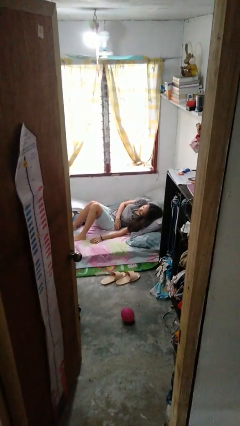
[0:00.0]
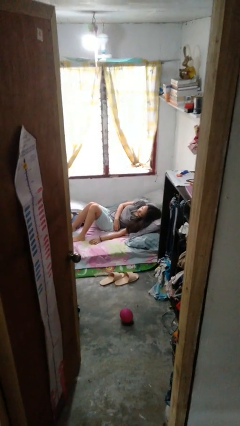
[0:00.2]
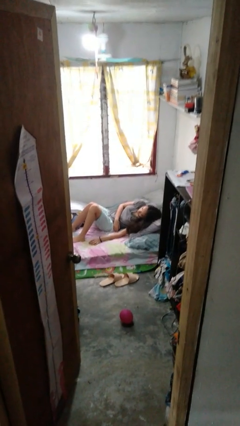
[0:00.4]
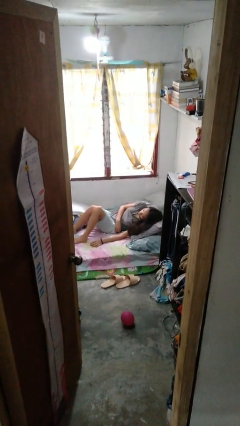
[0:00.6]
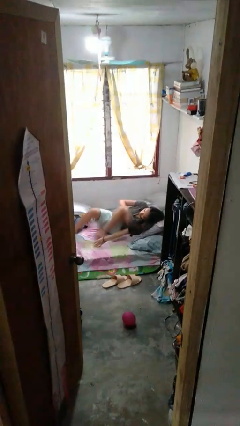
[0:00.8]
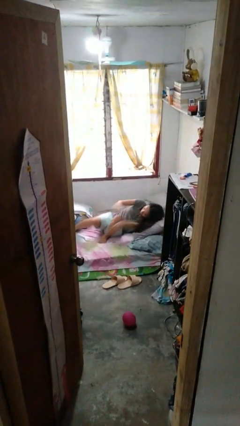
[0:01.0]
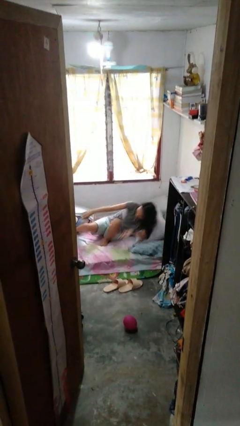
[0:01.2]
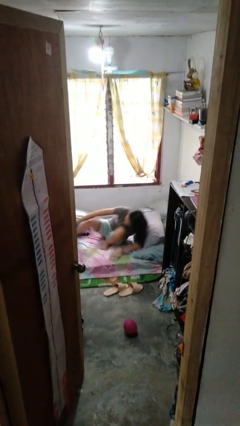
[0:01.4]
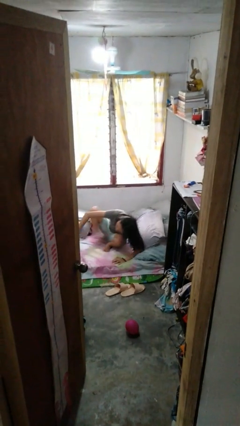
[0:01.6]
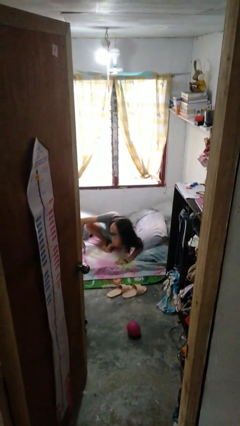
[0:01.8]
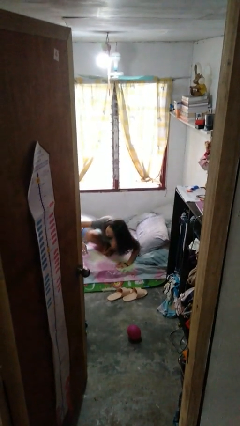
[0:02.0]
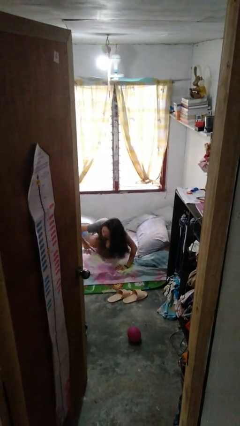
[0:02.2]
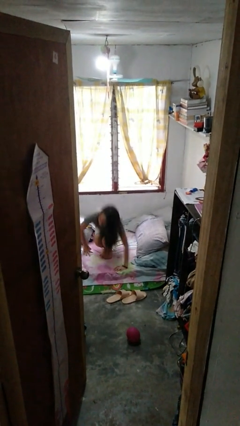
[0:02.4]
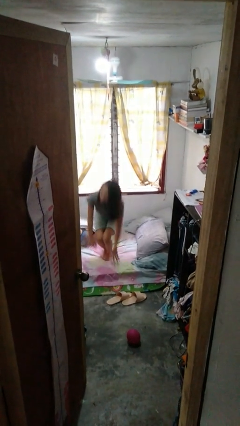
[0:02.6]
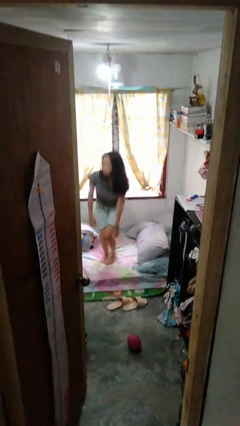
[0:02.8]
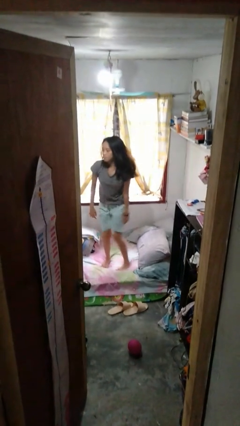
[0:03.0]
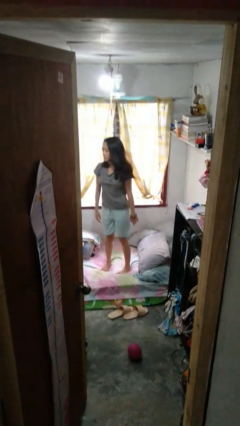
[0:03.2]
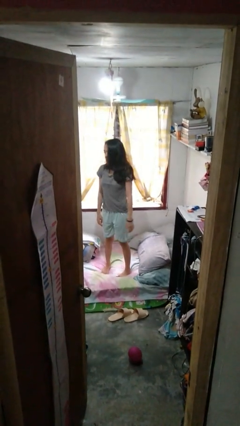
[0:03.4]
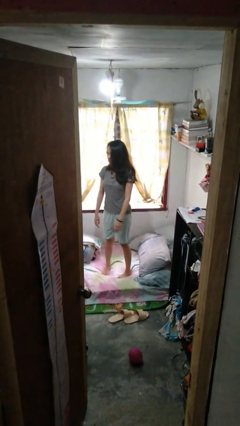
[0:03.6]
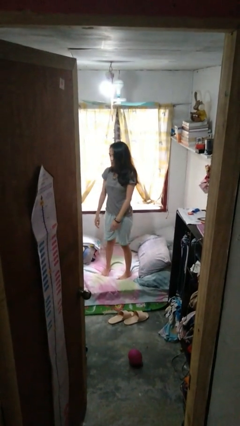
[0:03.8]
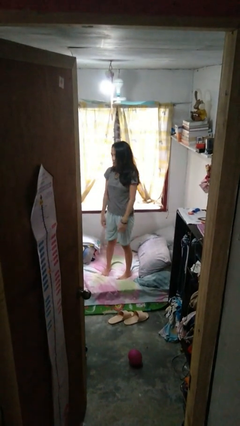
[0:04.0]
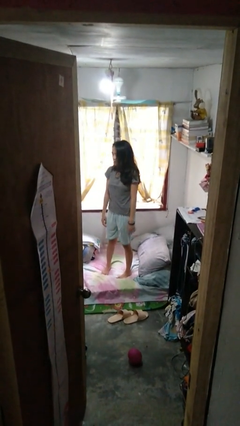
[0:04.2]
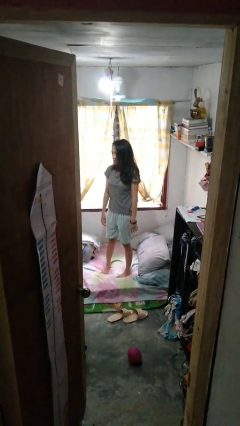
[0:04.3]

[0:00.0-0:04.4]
person stands up

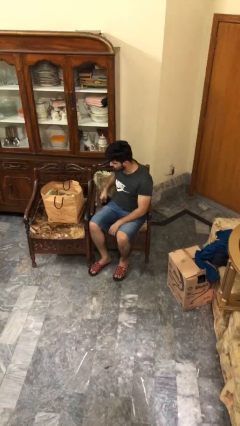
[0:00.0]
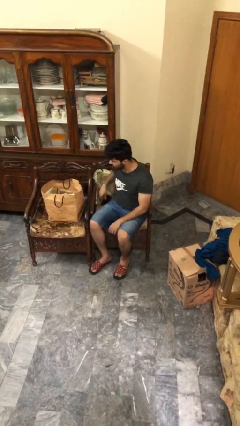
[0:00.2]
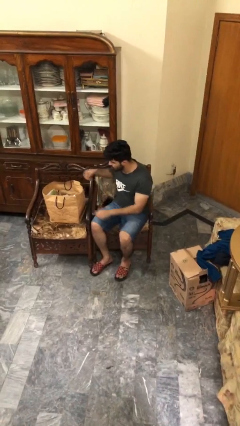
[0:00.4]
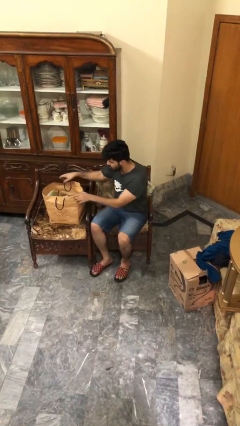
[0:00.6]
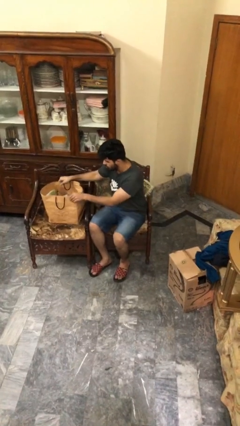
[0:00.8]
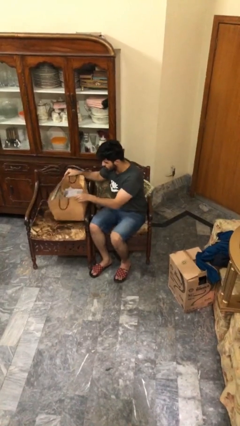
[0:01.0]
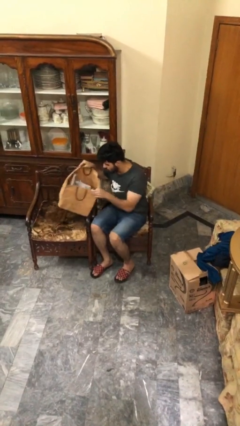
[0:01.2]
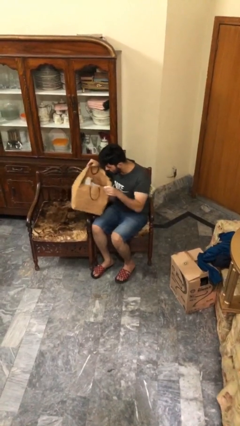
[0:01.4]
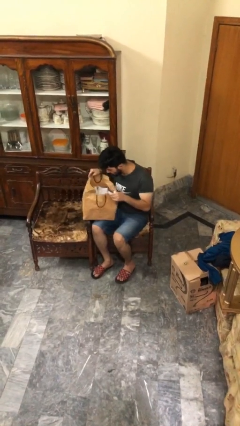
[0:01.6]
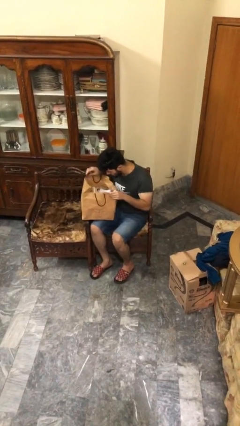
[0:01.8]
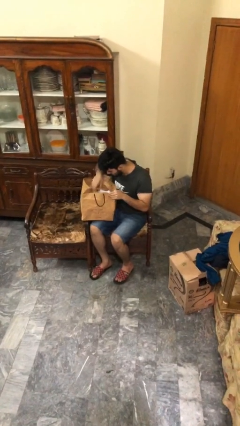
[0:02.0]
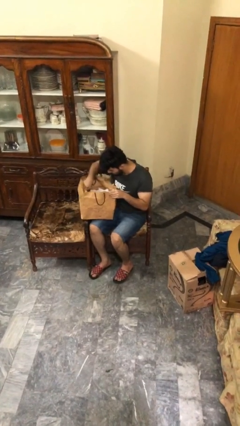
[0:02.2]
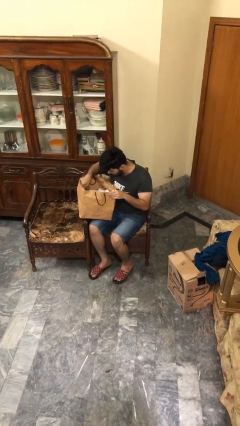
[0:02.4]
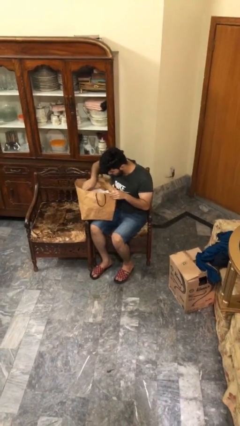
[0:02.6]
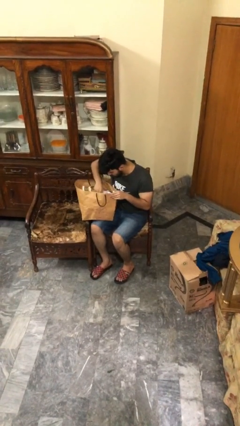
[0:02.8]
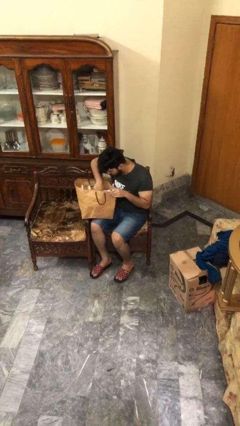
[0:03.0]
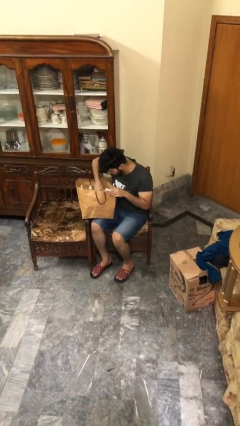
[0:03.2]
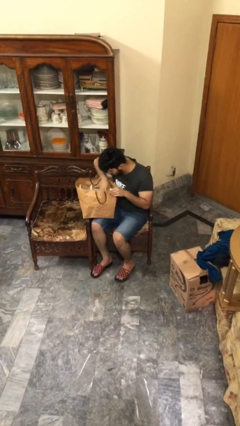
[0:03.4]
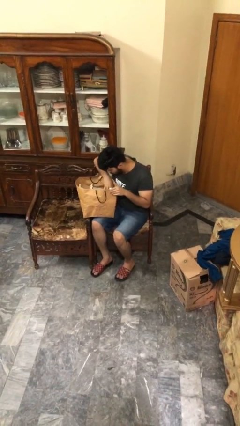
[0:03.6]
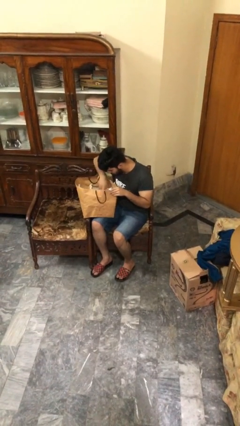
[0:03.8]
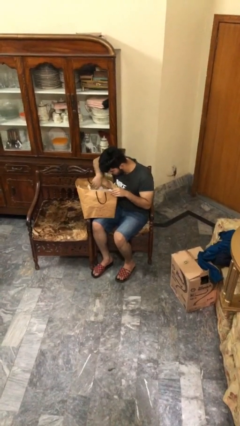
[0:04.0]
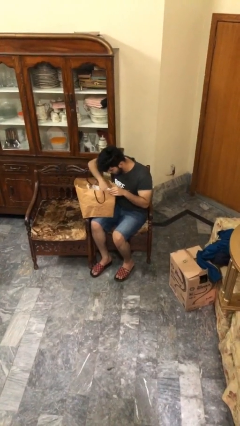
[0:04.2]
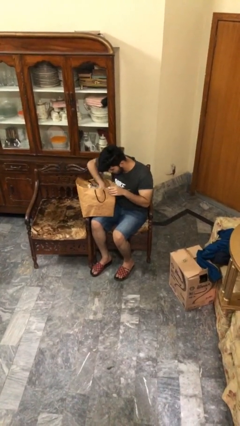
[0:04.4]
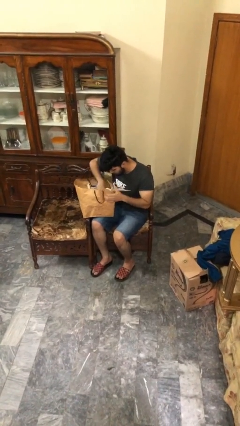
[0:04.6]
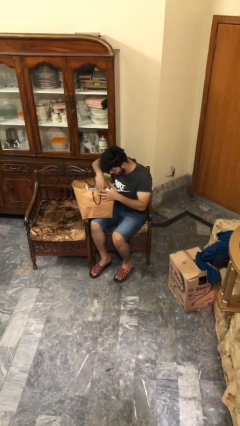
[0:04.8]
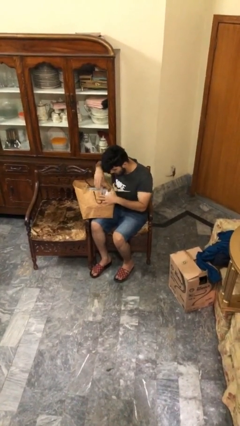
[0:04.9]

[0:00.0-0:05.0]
person searches in bag

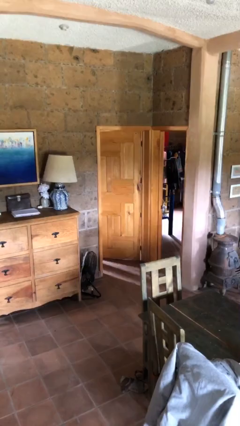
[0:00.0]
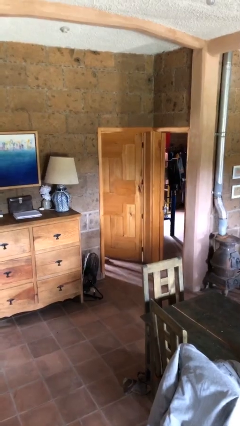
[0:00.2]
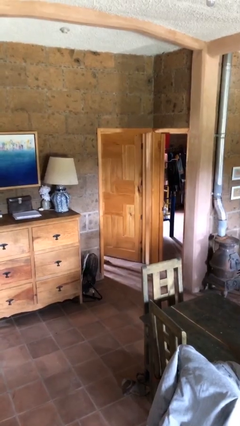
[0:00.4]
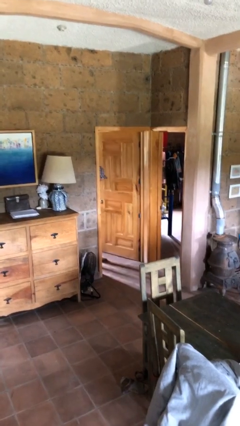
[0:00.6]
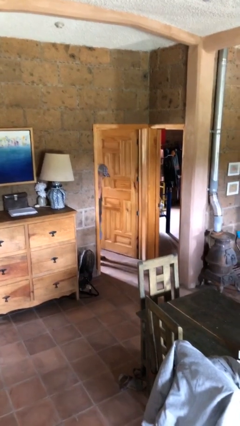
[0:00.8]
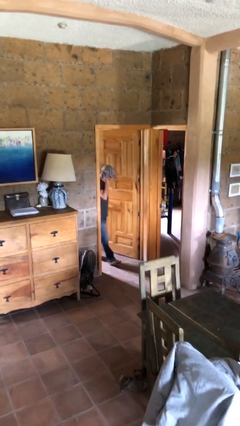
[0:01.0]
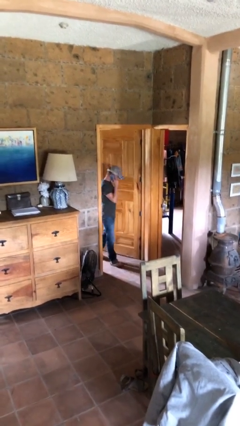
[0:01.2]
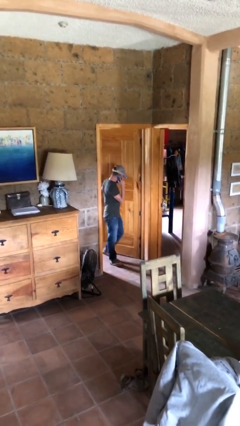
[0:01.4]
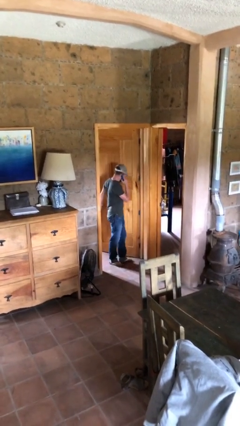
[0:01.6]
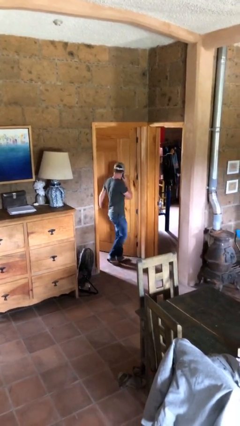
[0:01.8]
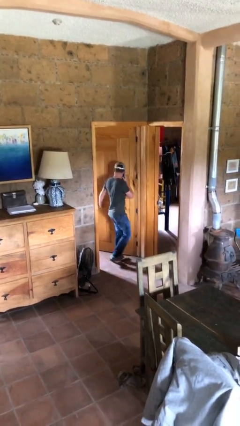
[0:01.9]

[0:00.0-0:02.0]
person enters scene through structure

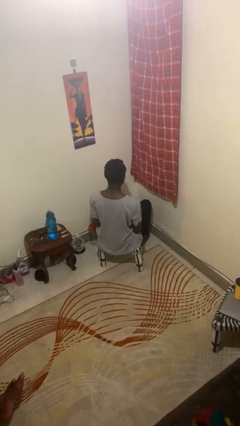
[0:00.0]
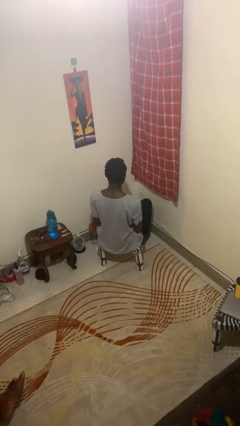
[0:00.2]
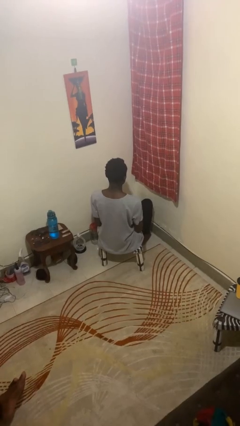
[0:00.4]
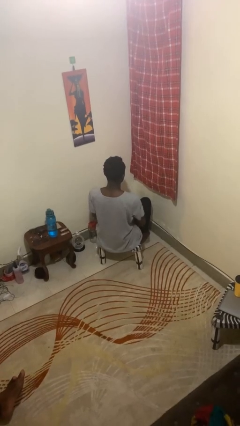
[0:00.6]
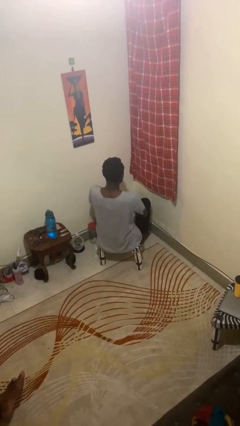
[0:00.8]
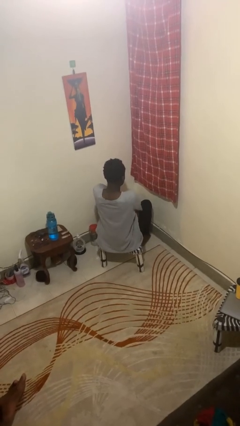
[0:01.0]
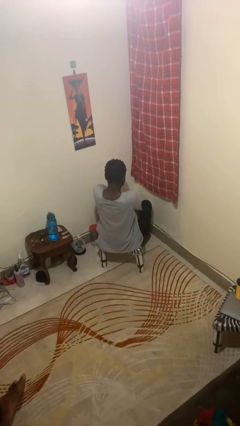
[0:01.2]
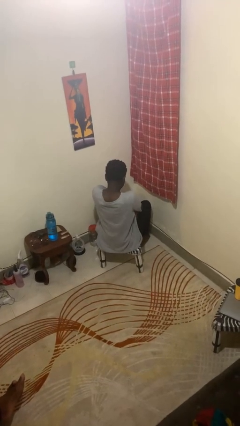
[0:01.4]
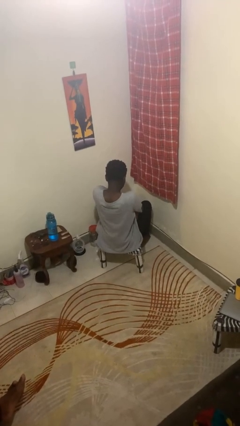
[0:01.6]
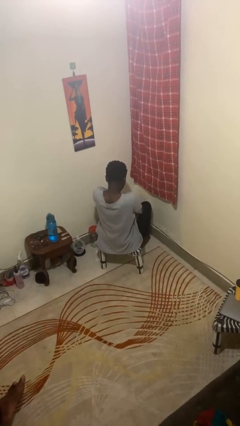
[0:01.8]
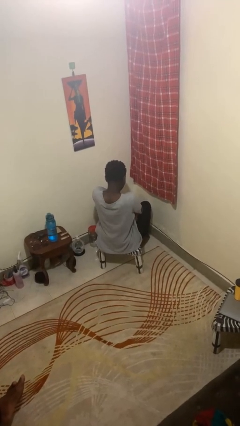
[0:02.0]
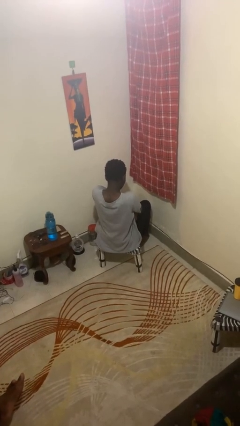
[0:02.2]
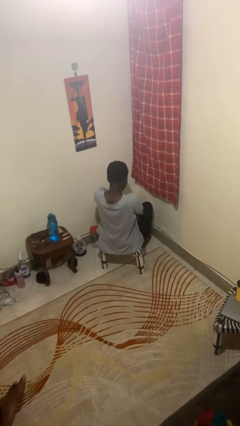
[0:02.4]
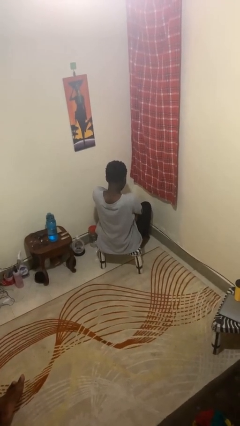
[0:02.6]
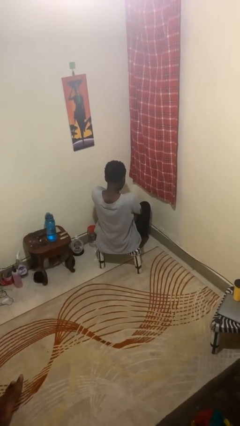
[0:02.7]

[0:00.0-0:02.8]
person crosses arms

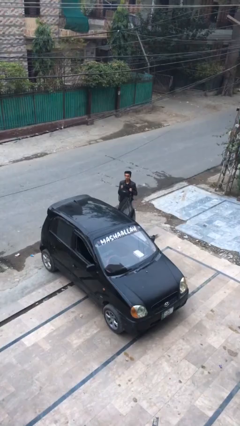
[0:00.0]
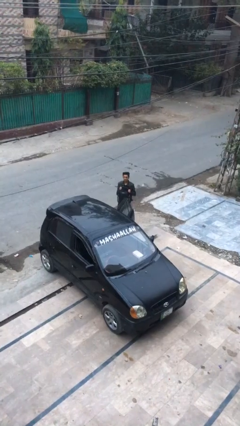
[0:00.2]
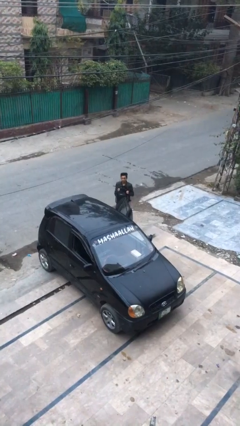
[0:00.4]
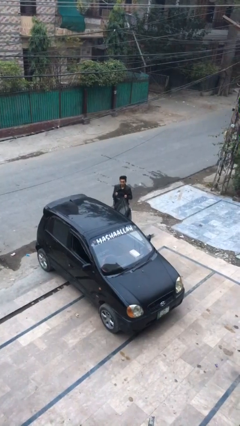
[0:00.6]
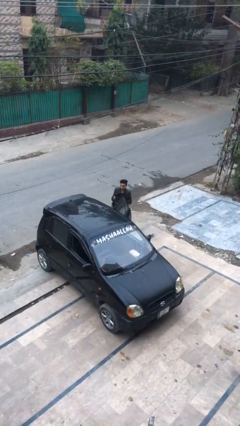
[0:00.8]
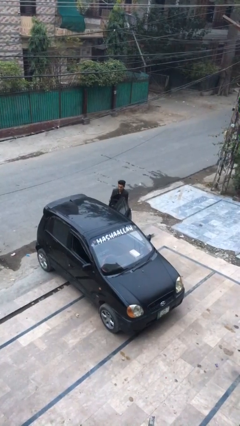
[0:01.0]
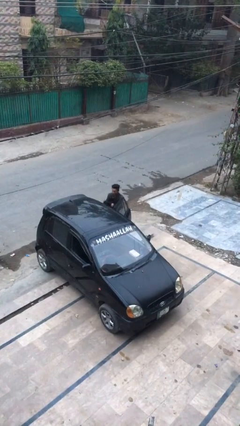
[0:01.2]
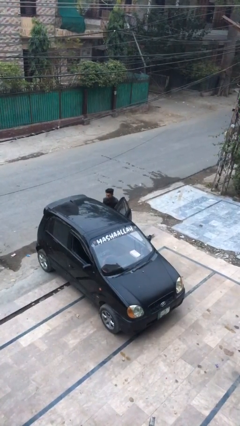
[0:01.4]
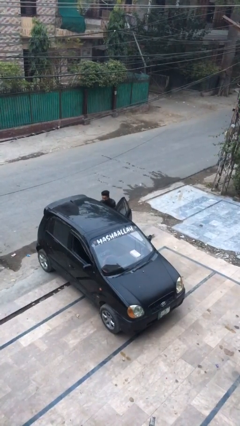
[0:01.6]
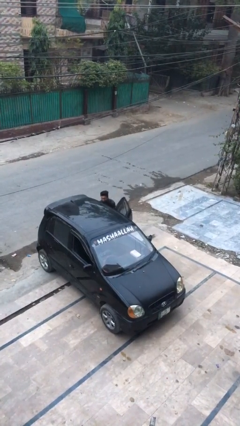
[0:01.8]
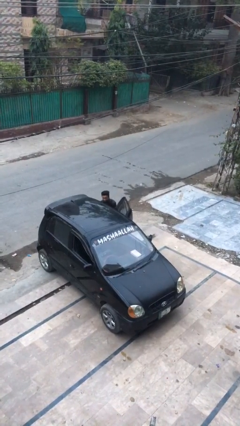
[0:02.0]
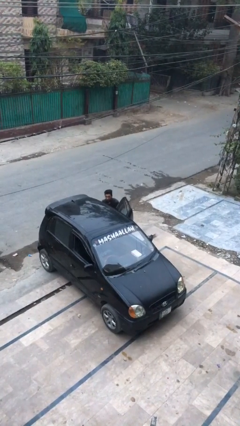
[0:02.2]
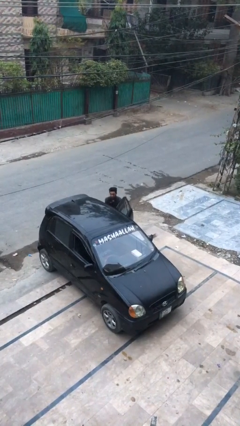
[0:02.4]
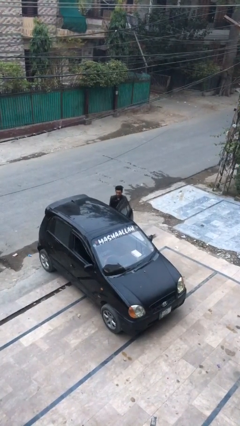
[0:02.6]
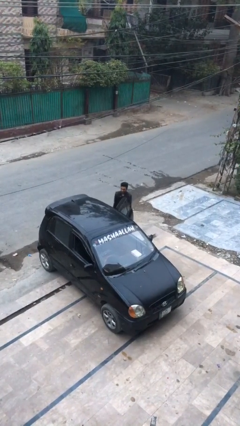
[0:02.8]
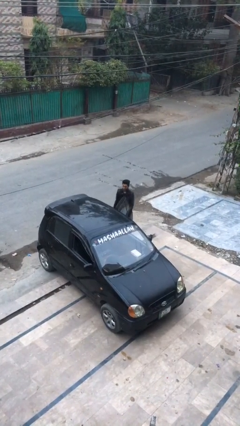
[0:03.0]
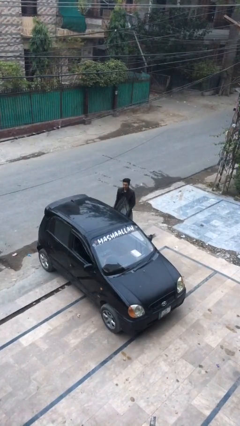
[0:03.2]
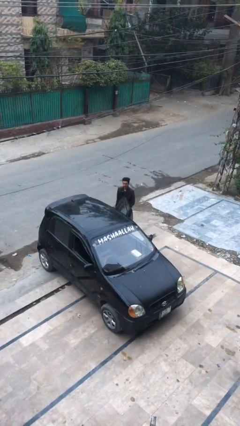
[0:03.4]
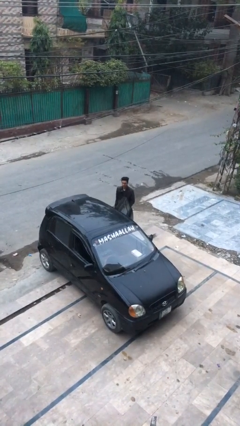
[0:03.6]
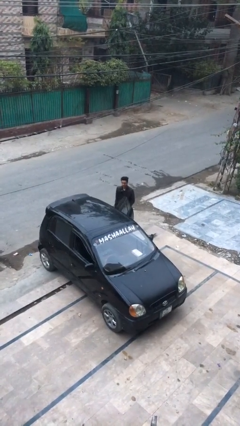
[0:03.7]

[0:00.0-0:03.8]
person loads car
